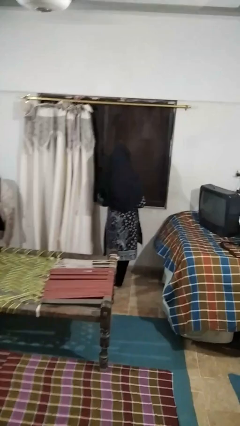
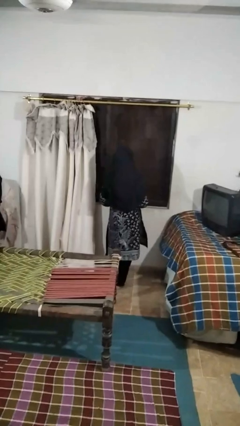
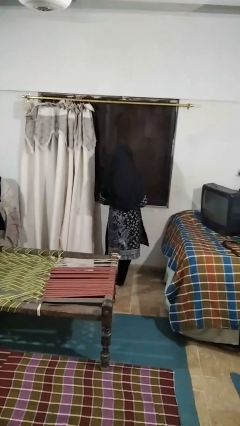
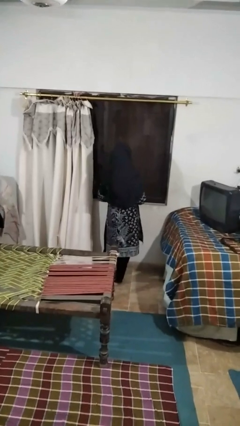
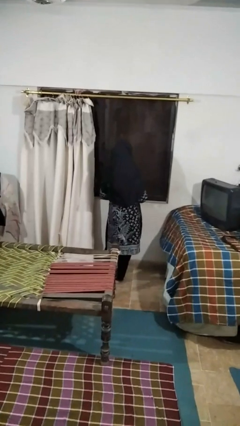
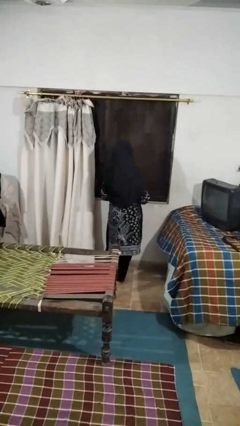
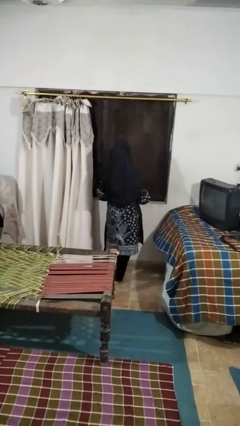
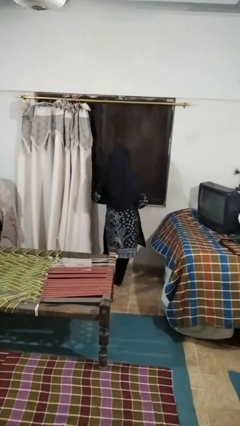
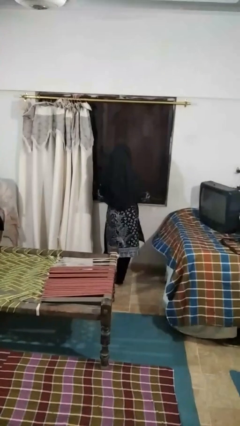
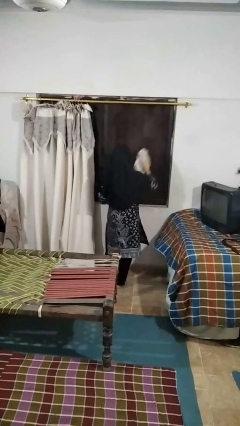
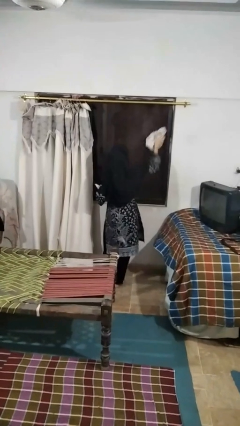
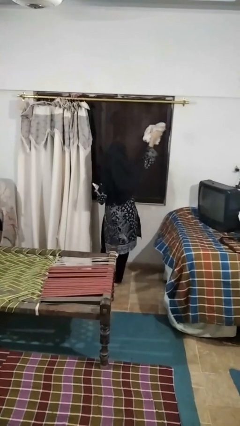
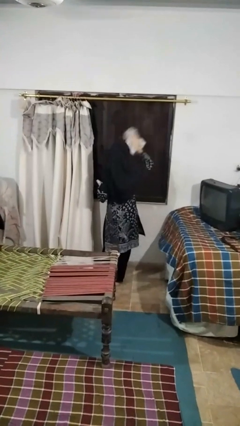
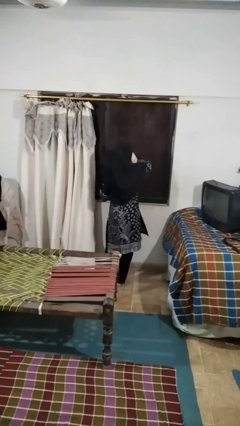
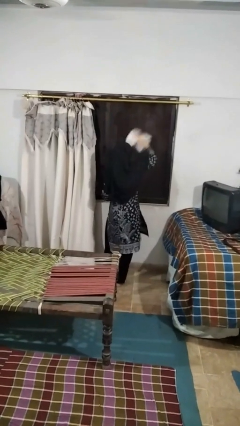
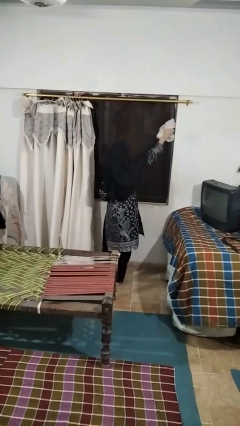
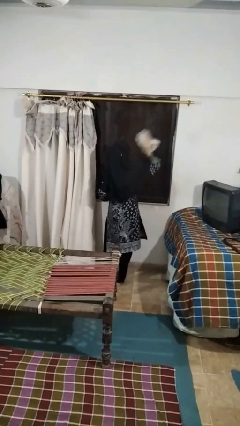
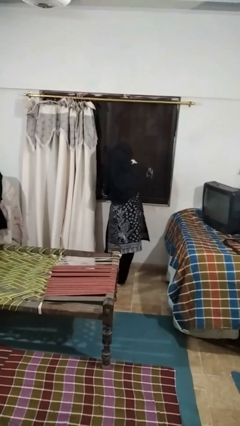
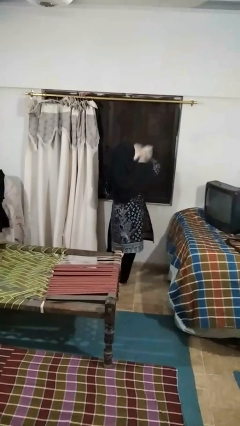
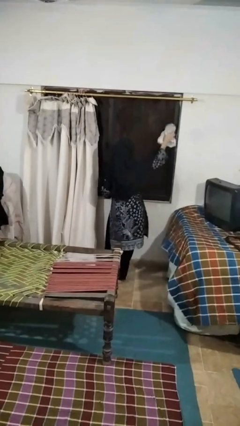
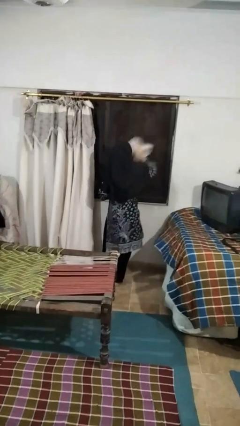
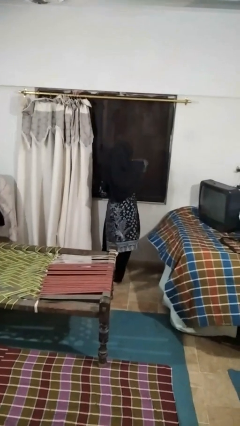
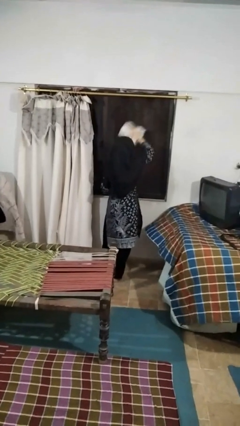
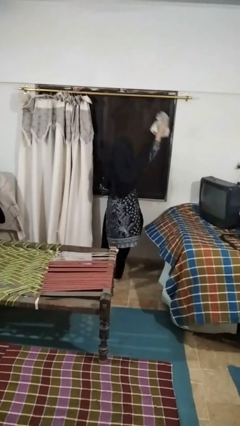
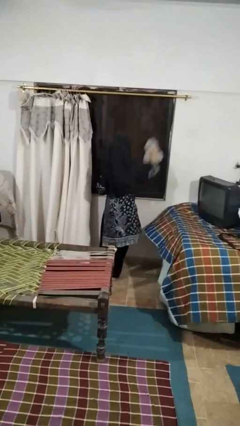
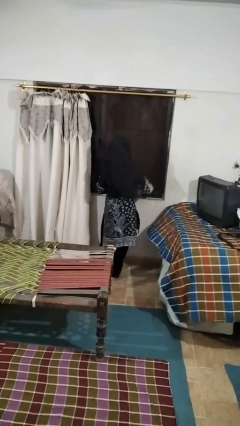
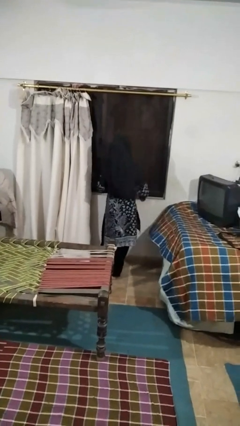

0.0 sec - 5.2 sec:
person washes window

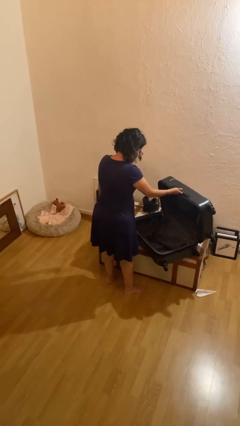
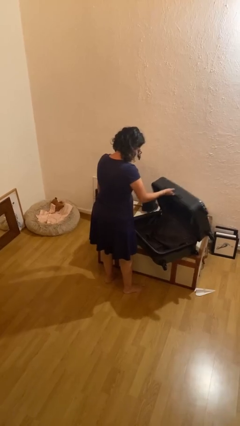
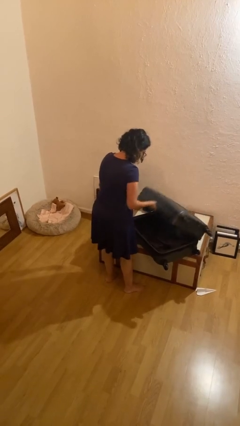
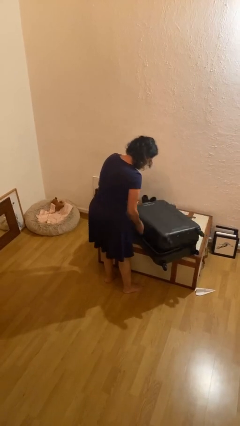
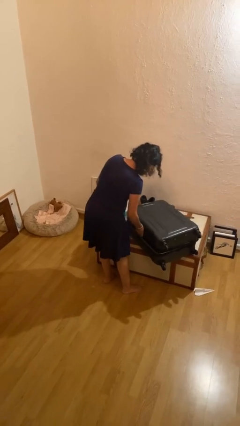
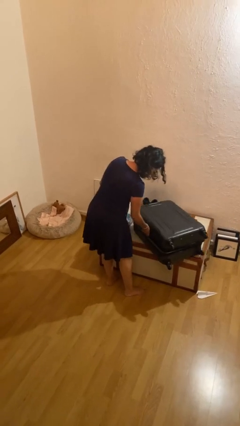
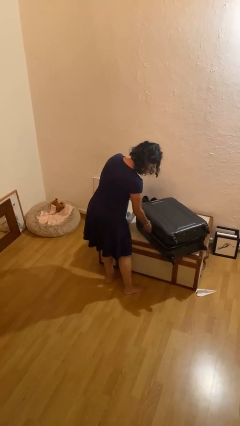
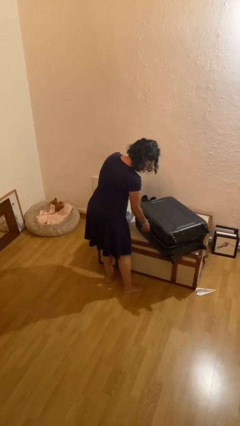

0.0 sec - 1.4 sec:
person closes suitcase

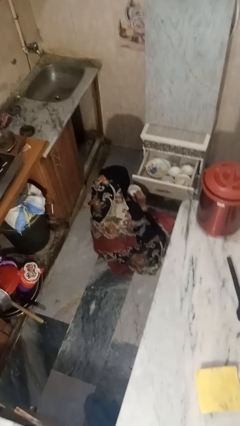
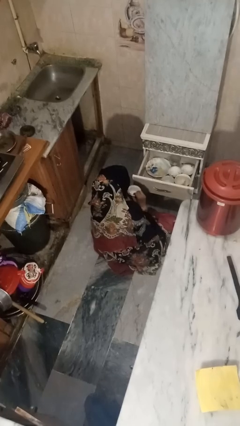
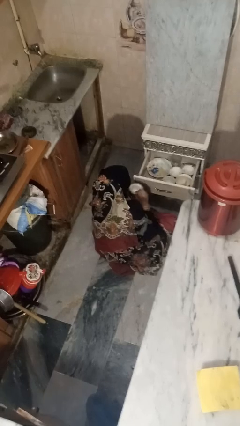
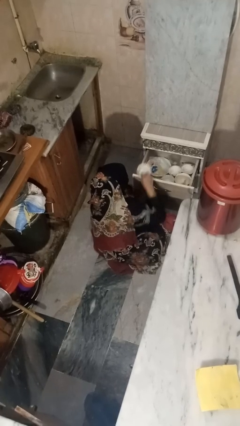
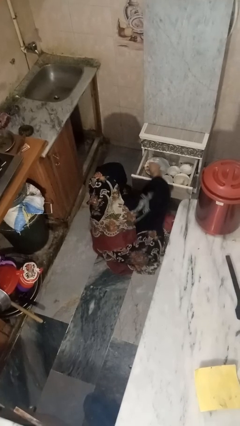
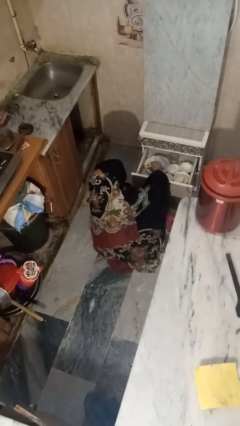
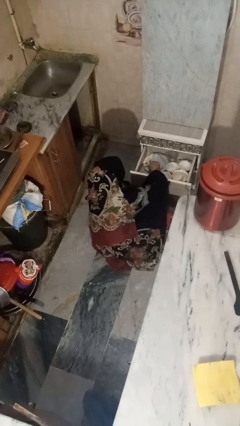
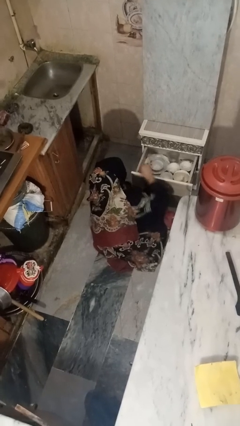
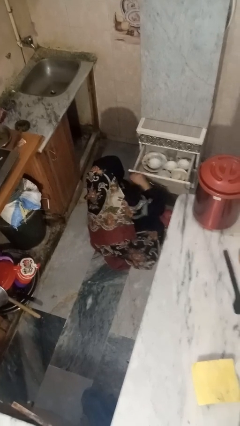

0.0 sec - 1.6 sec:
person puts object into kitchen drawer

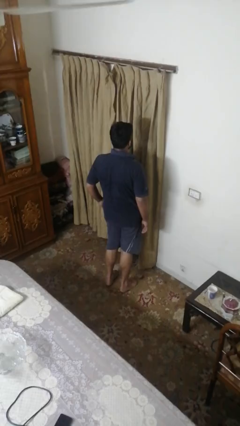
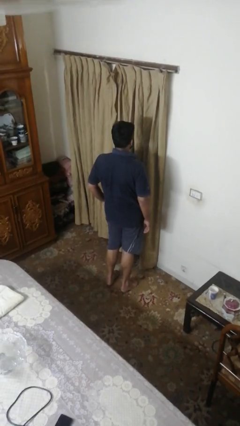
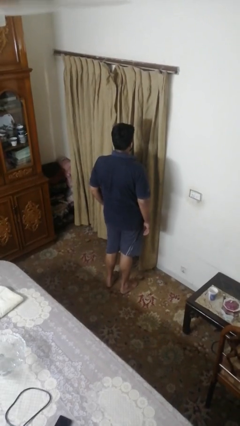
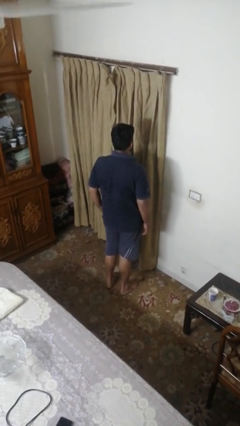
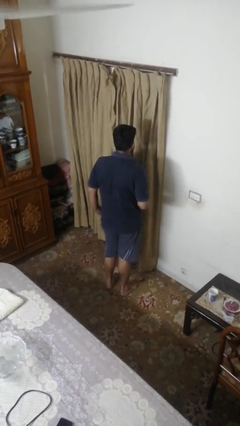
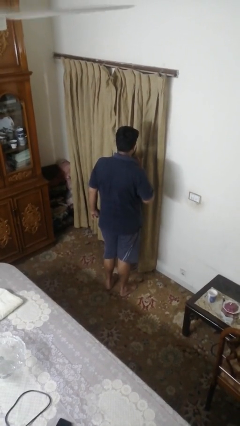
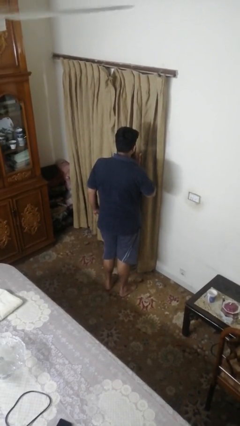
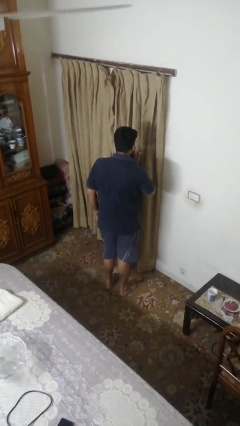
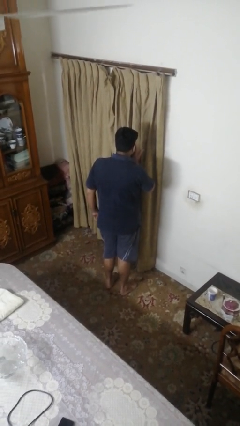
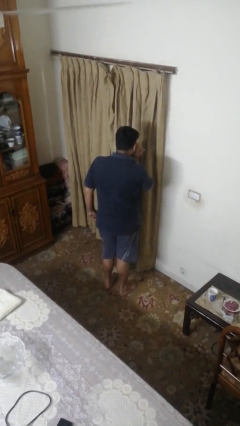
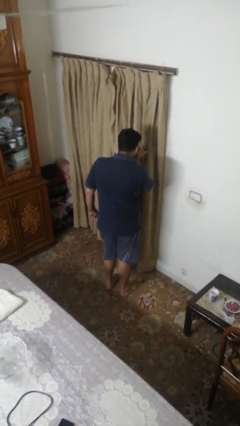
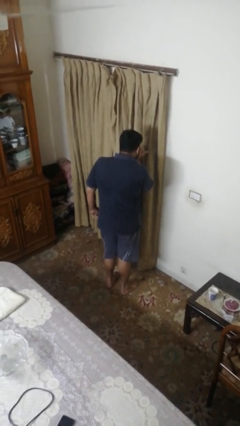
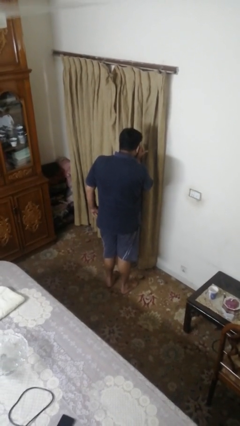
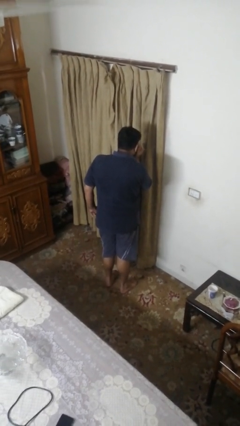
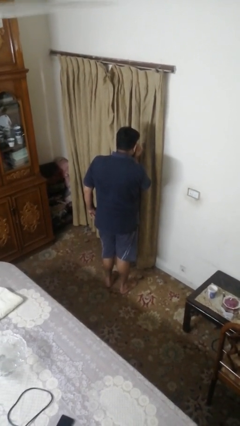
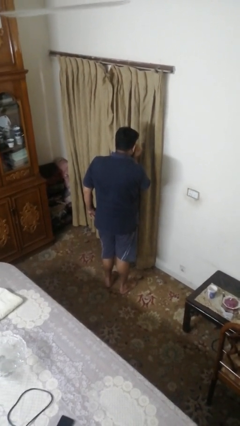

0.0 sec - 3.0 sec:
person gestures blow kiss

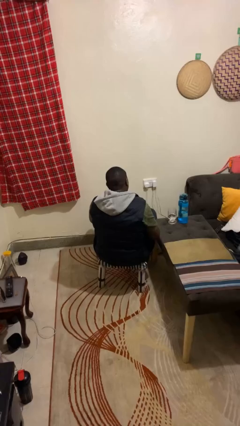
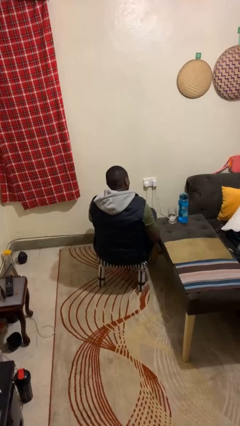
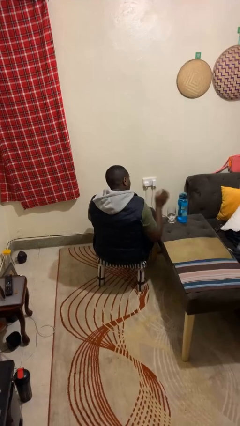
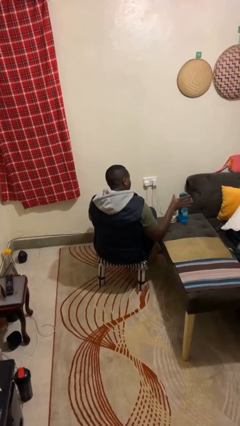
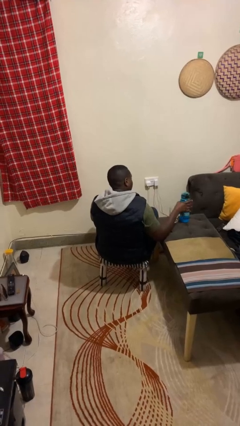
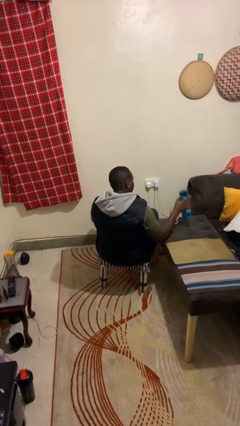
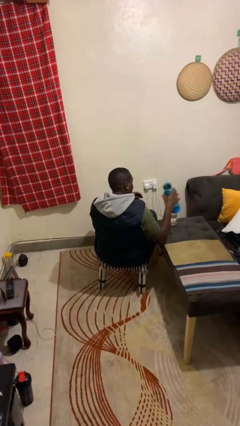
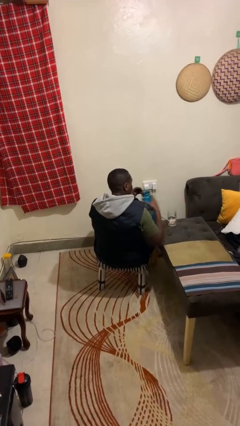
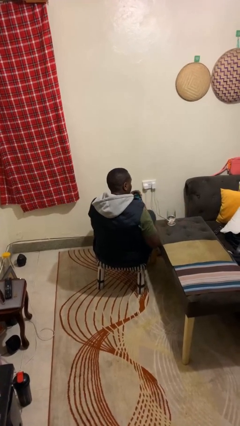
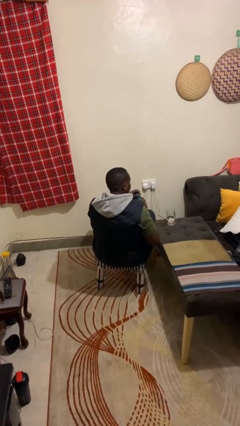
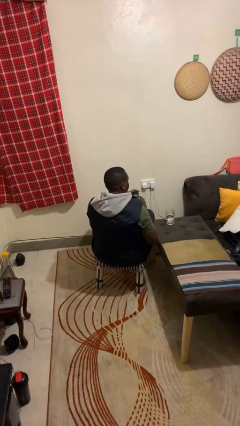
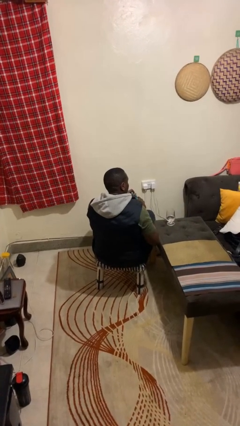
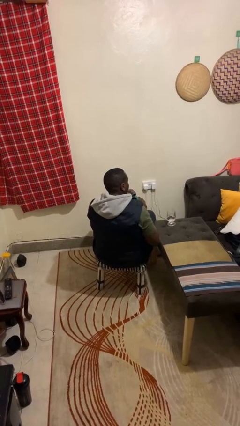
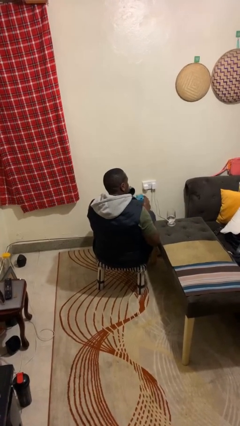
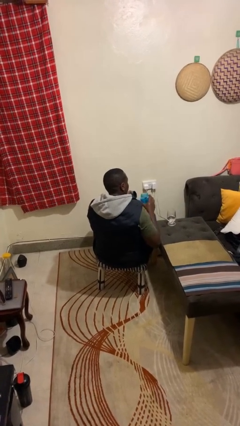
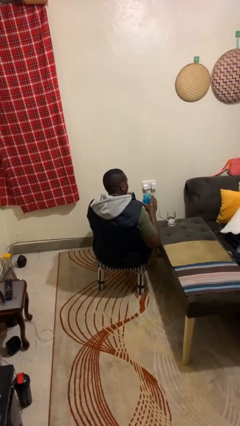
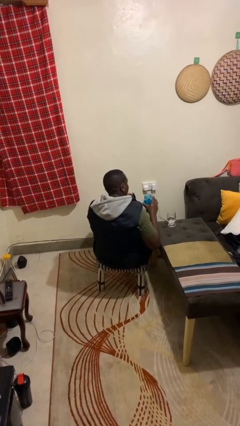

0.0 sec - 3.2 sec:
person unscrews lid from bottle

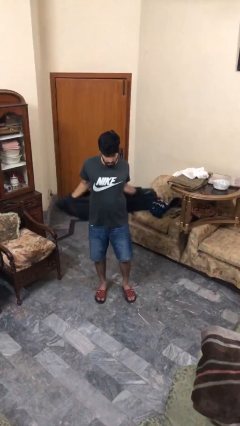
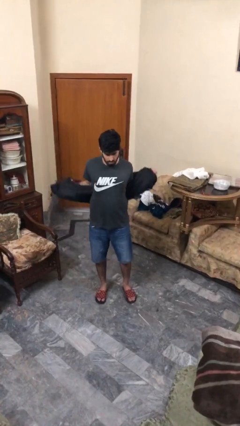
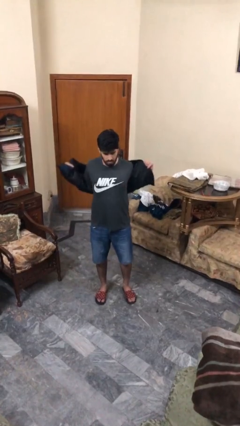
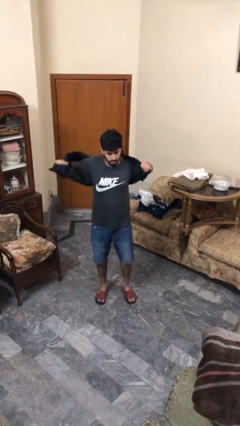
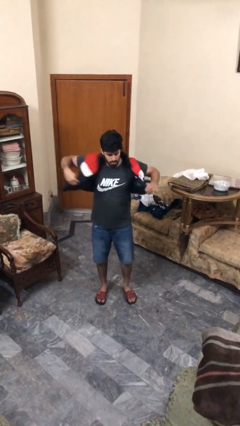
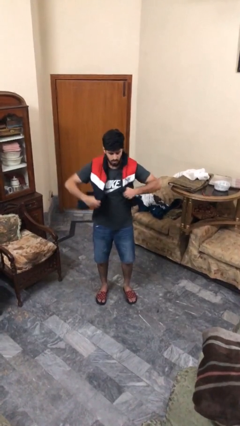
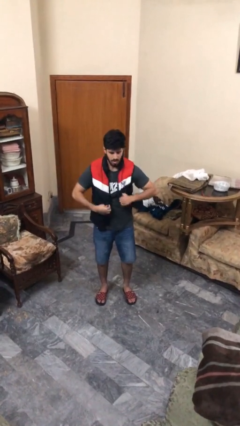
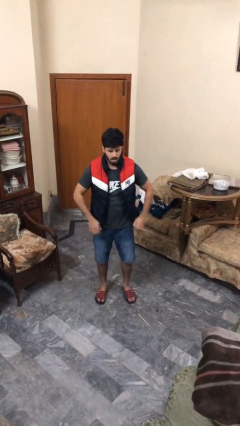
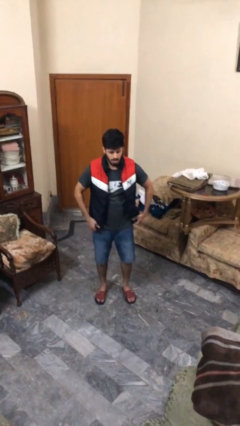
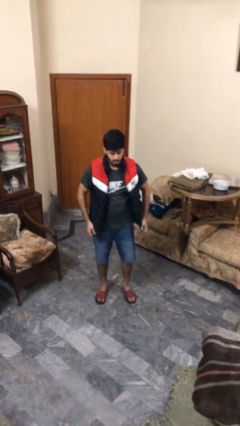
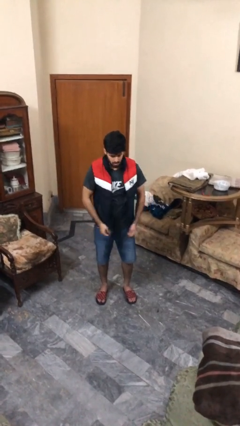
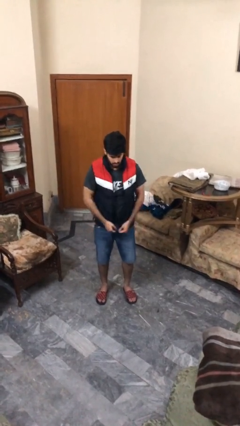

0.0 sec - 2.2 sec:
person puts on jacket

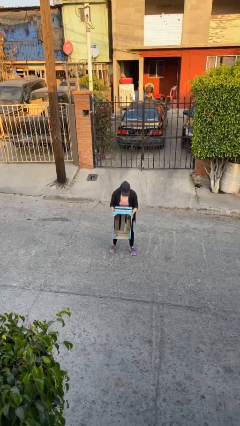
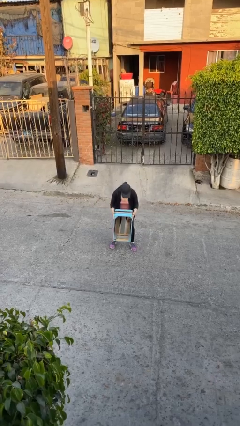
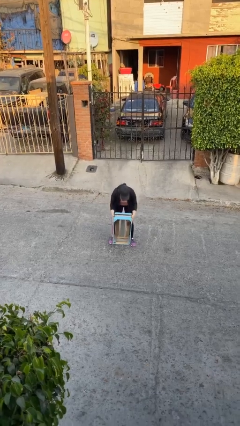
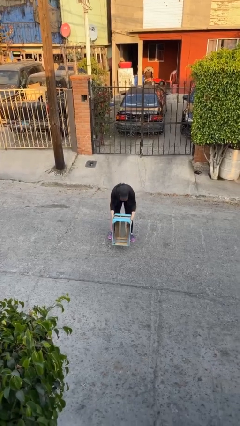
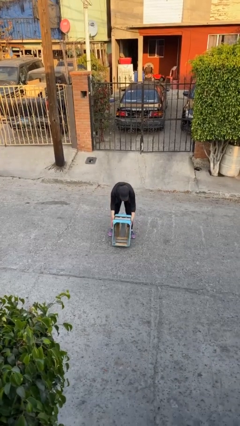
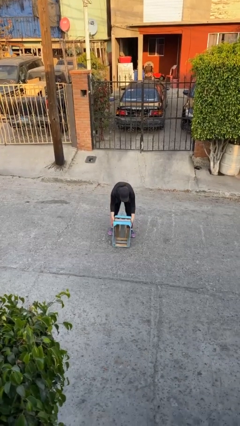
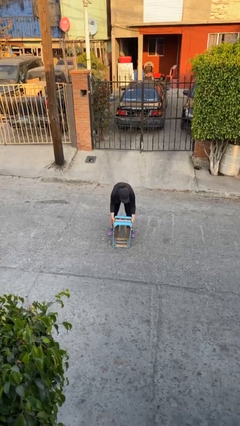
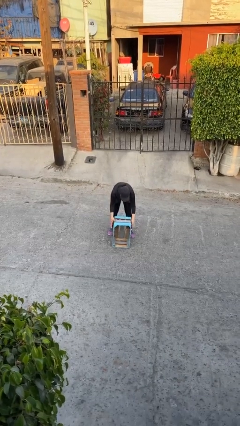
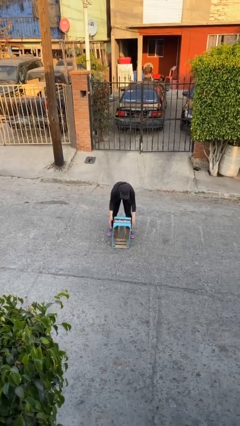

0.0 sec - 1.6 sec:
person puts down object on floor
